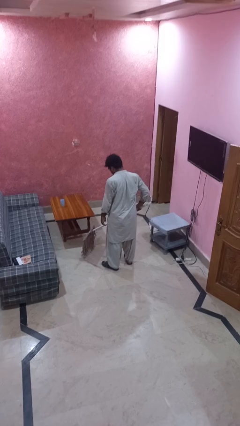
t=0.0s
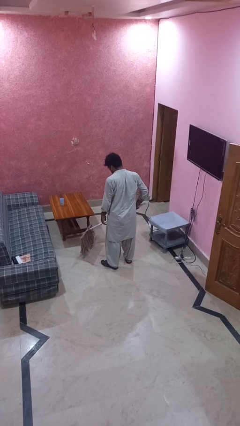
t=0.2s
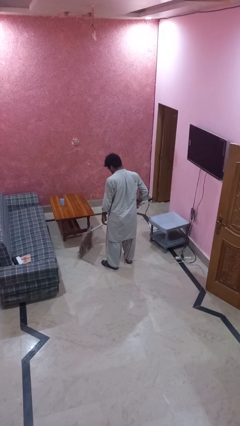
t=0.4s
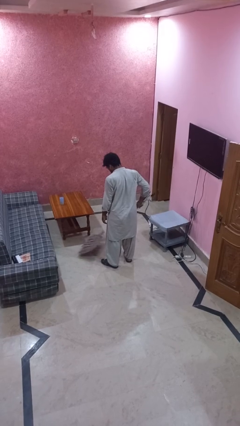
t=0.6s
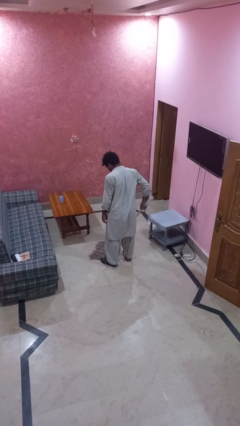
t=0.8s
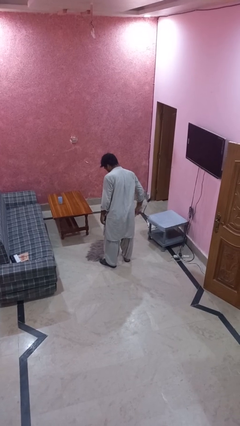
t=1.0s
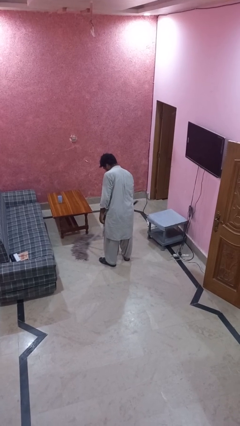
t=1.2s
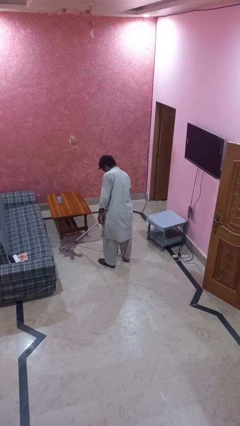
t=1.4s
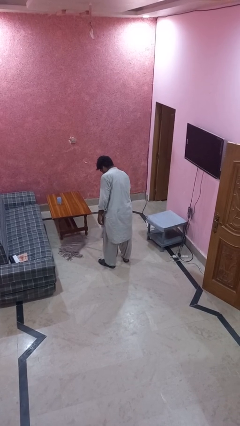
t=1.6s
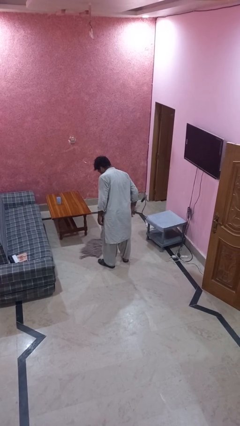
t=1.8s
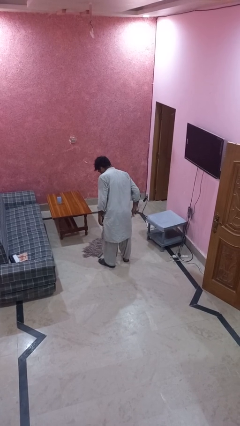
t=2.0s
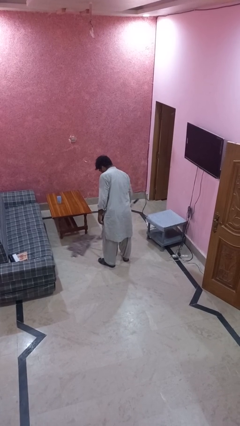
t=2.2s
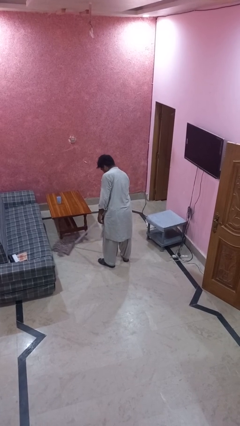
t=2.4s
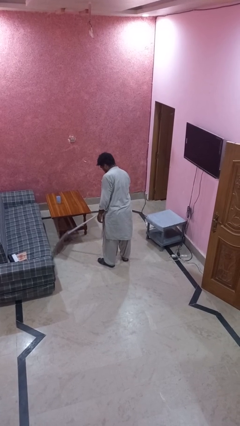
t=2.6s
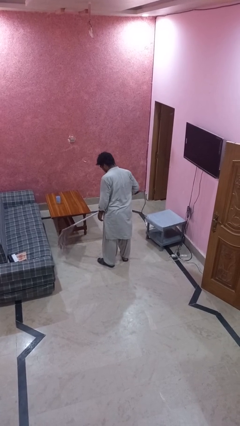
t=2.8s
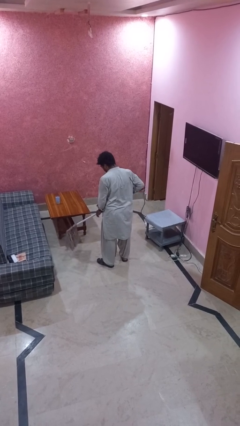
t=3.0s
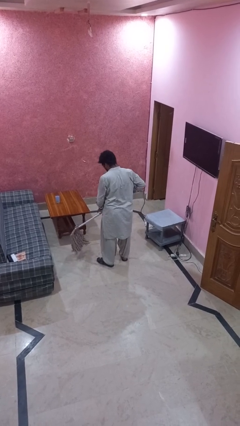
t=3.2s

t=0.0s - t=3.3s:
person mops

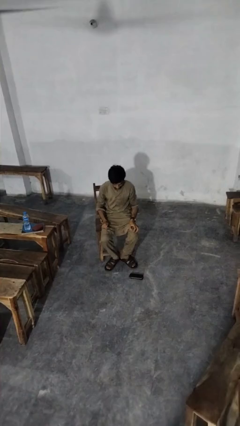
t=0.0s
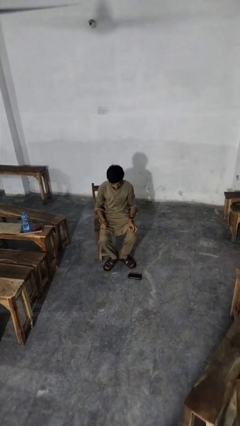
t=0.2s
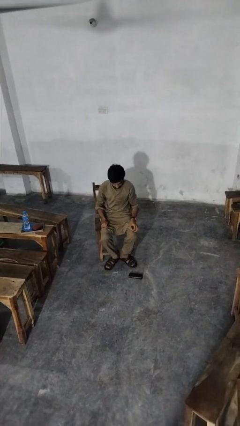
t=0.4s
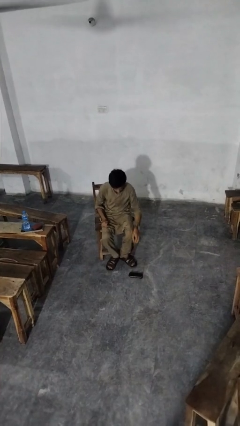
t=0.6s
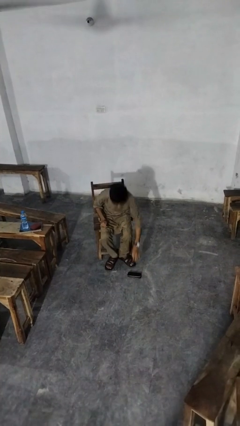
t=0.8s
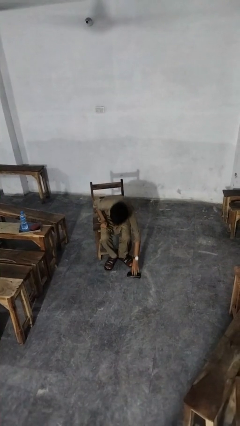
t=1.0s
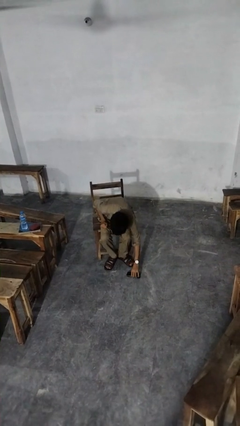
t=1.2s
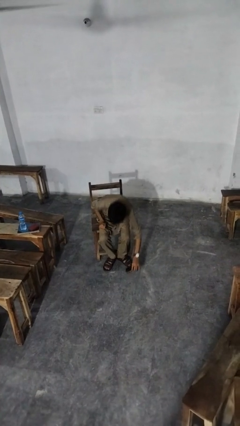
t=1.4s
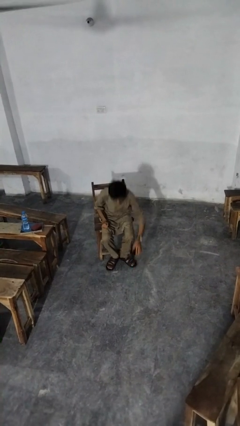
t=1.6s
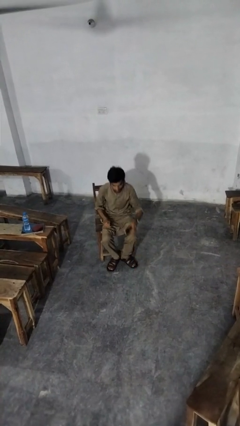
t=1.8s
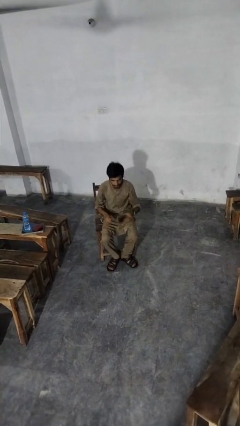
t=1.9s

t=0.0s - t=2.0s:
person picks up object from floor

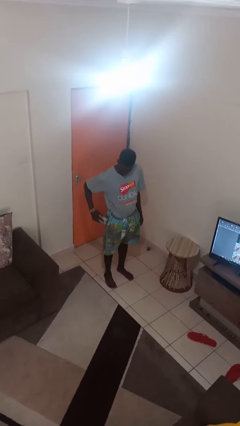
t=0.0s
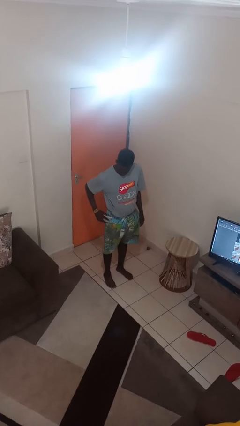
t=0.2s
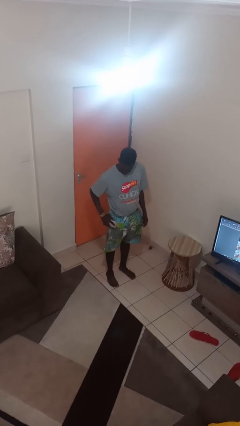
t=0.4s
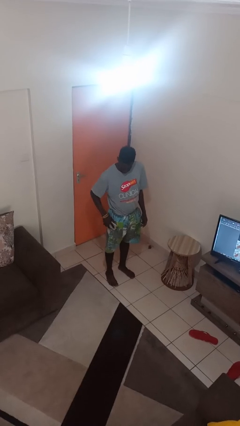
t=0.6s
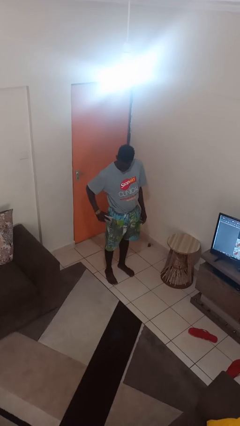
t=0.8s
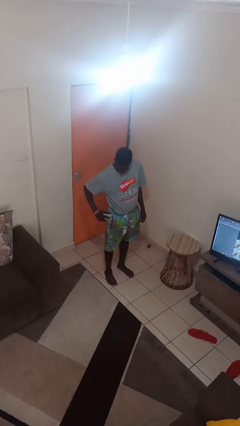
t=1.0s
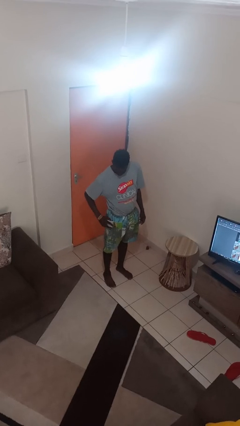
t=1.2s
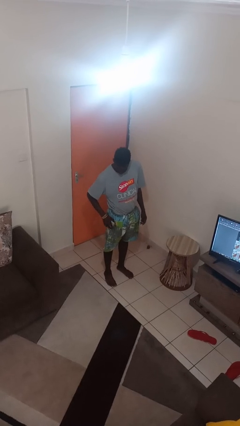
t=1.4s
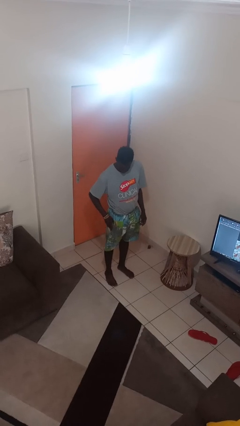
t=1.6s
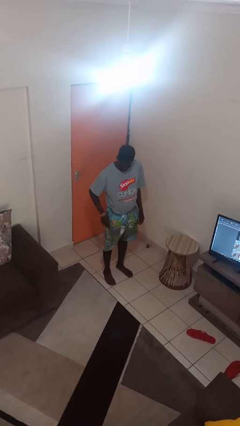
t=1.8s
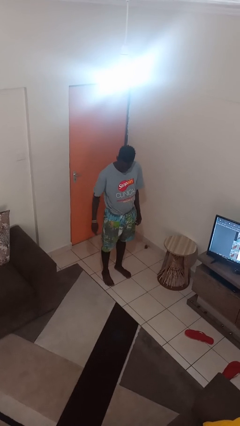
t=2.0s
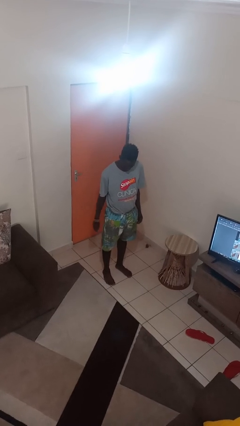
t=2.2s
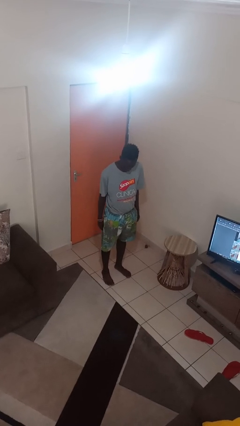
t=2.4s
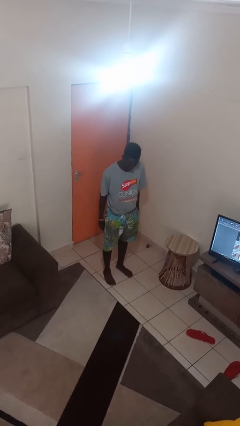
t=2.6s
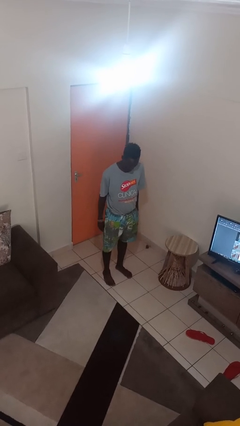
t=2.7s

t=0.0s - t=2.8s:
person puts phone into pocket

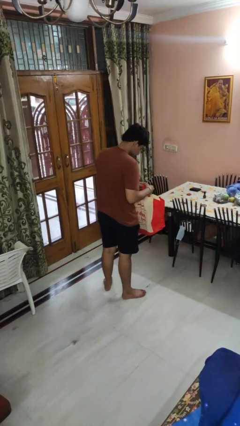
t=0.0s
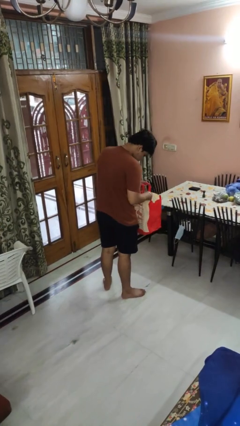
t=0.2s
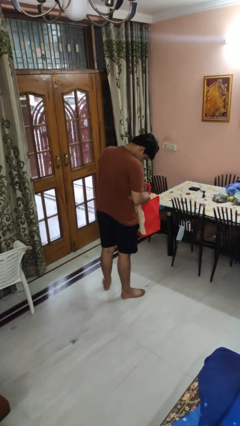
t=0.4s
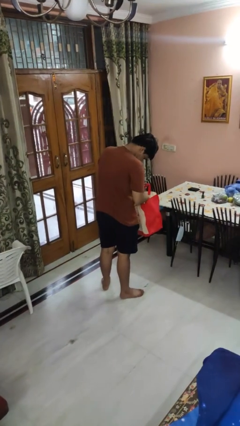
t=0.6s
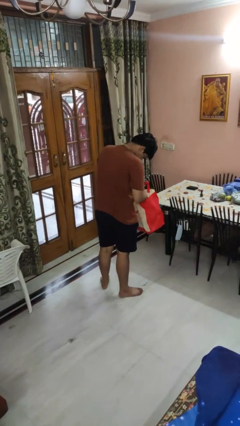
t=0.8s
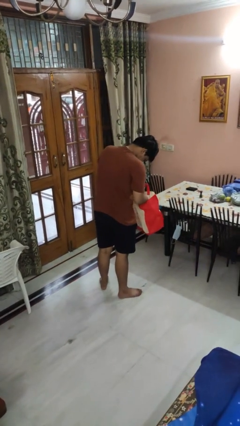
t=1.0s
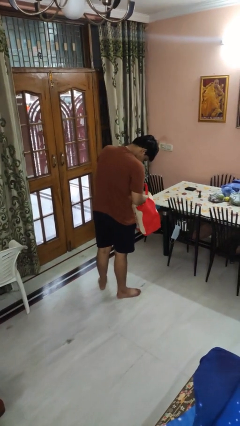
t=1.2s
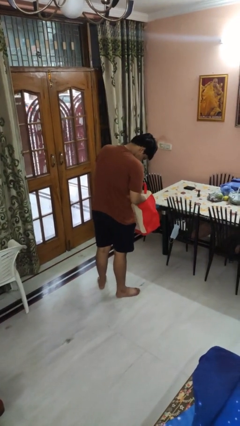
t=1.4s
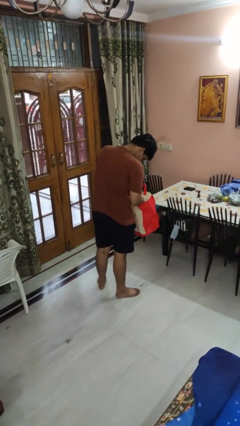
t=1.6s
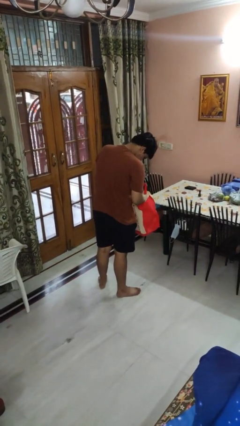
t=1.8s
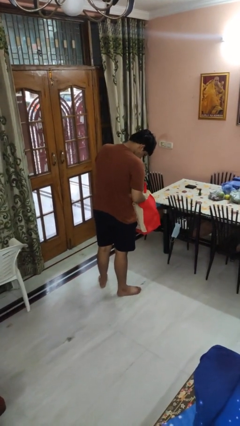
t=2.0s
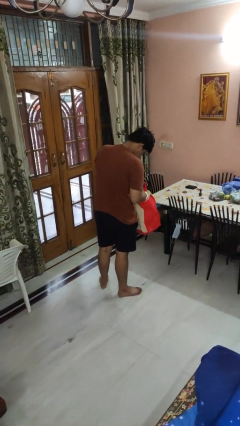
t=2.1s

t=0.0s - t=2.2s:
person searches in bag

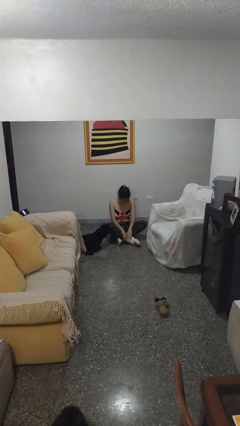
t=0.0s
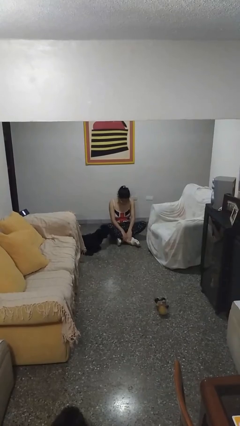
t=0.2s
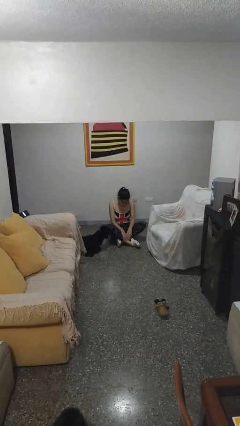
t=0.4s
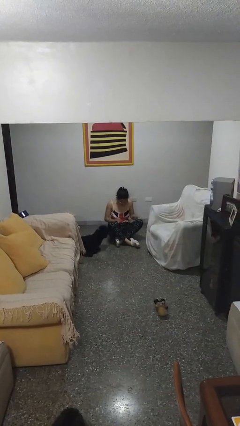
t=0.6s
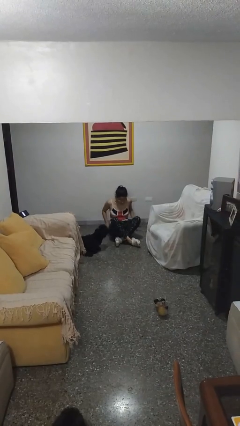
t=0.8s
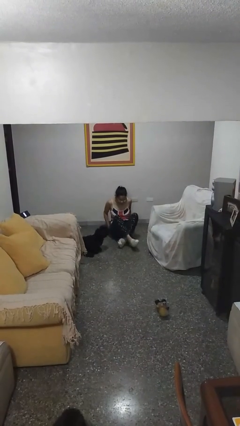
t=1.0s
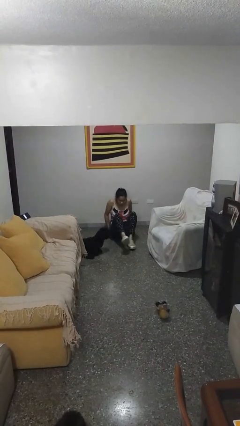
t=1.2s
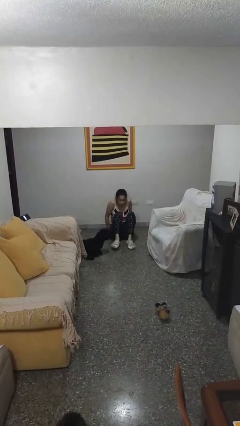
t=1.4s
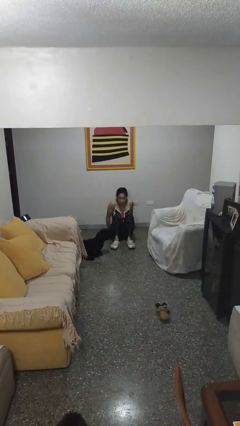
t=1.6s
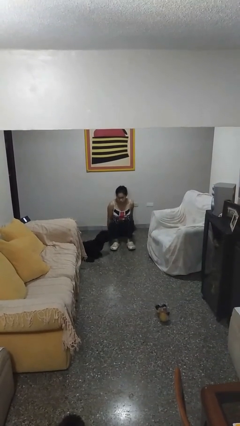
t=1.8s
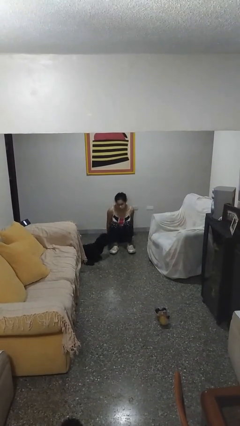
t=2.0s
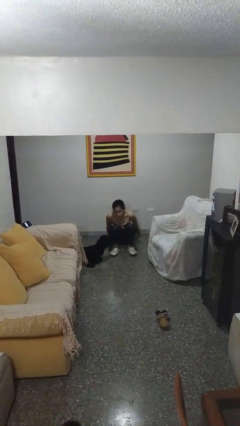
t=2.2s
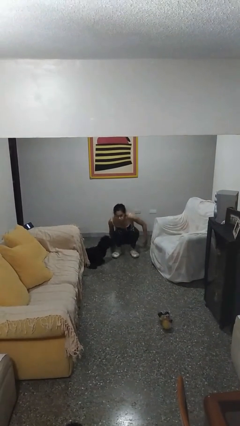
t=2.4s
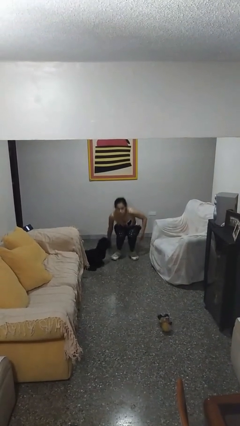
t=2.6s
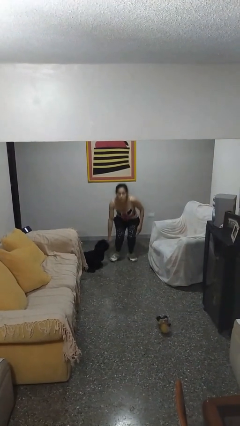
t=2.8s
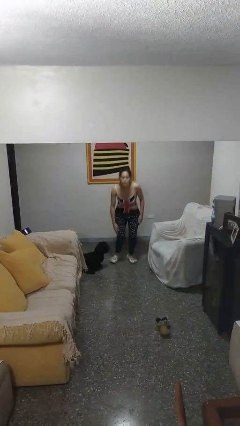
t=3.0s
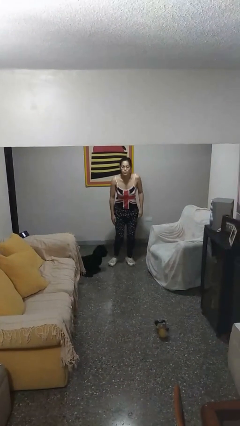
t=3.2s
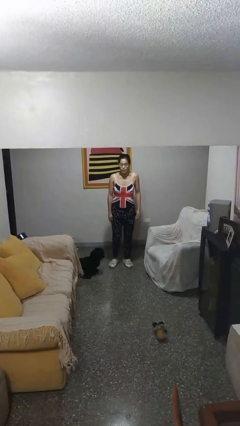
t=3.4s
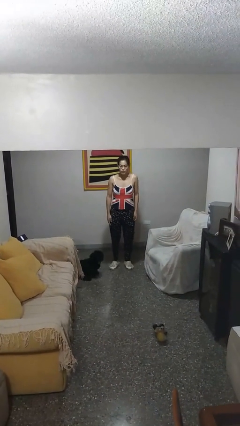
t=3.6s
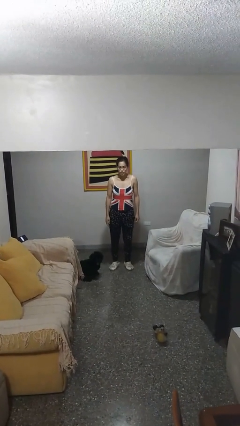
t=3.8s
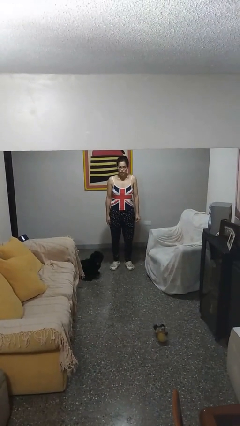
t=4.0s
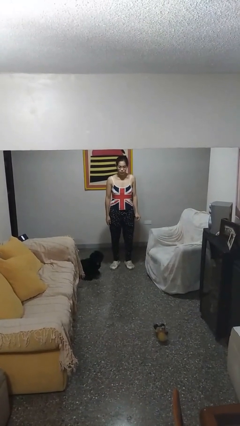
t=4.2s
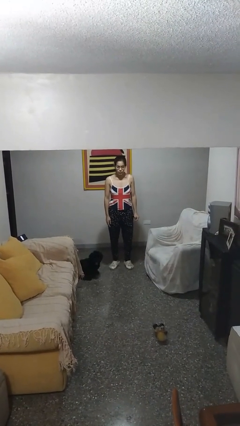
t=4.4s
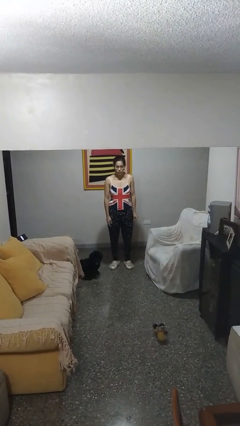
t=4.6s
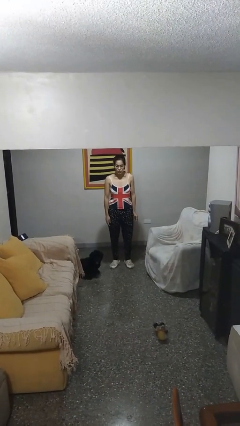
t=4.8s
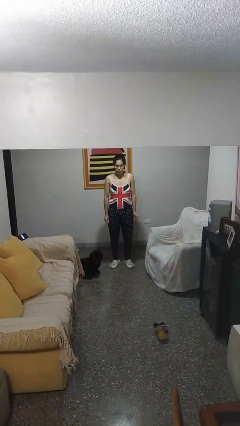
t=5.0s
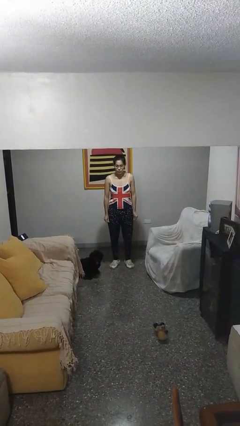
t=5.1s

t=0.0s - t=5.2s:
person stands up from floor

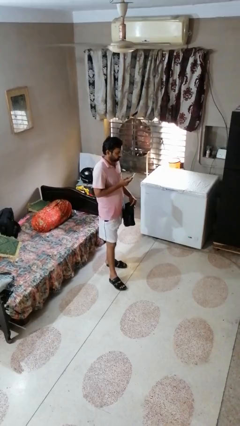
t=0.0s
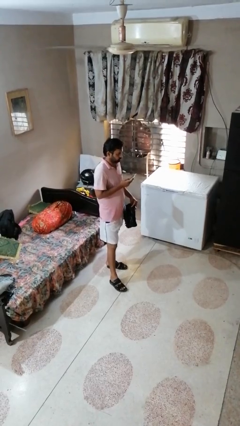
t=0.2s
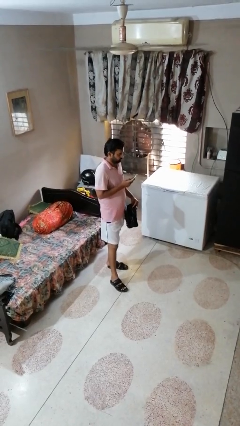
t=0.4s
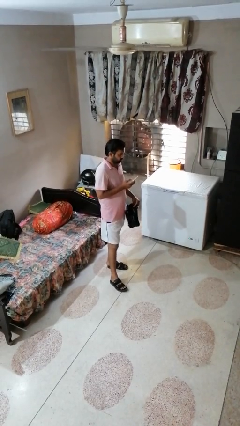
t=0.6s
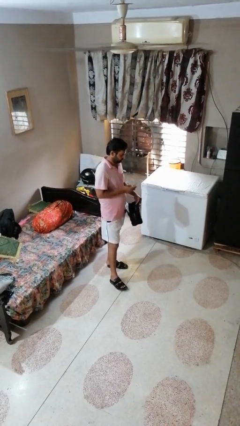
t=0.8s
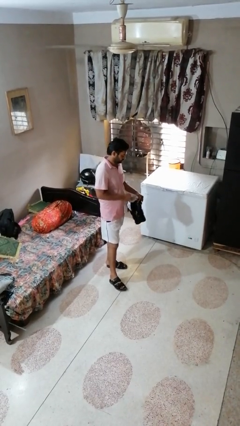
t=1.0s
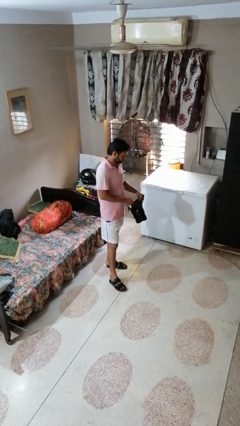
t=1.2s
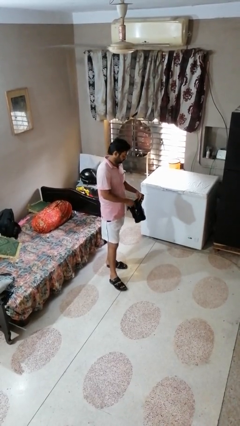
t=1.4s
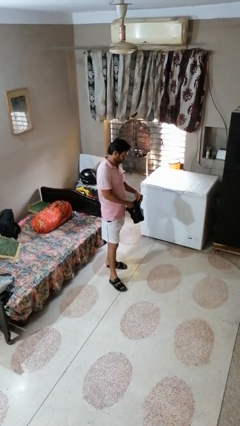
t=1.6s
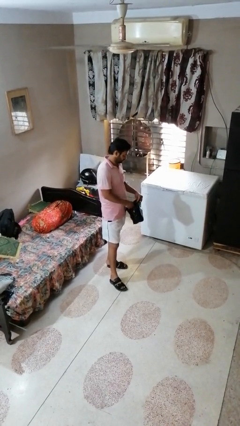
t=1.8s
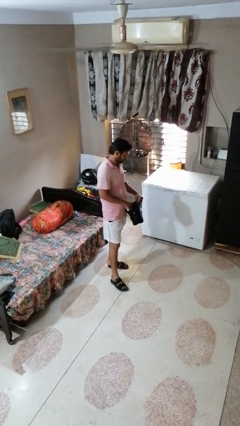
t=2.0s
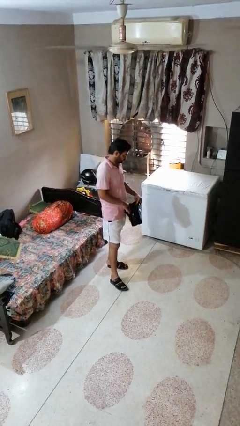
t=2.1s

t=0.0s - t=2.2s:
person puts object into purse

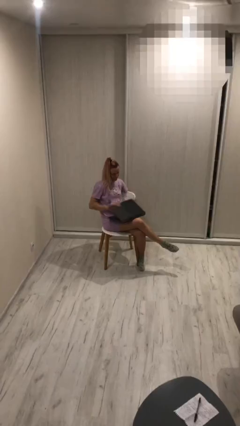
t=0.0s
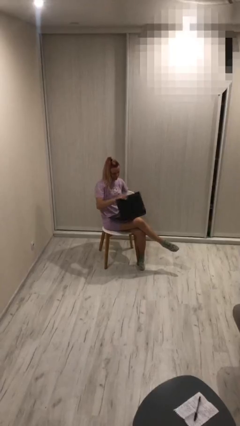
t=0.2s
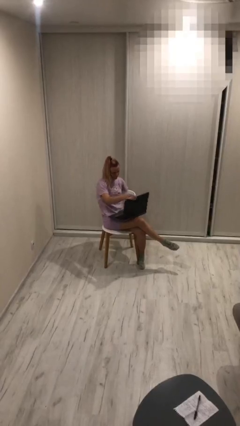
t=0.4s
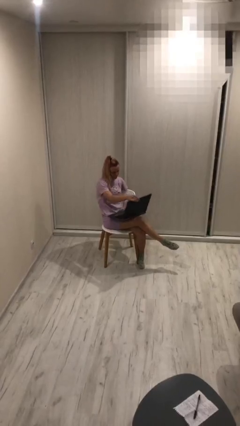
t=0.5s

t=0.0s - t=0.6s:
person opens laptop
